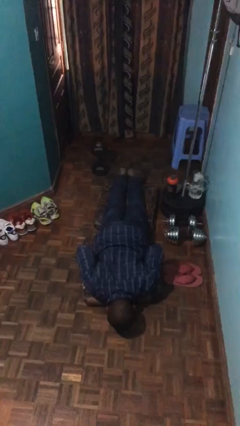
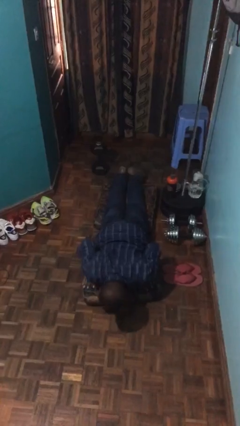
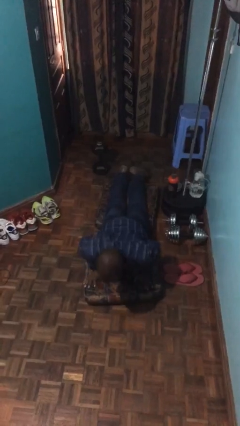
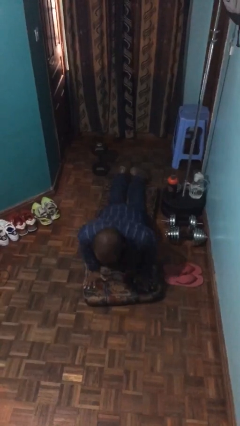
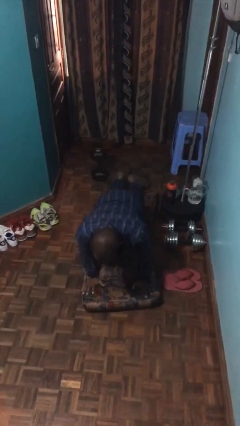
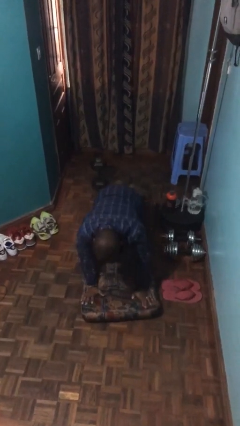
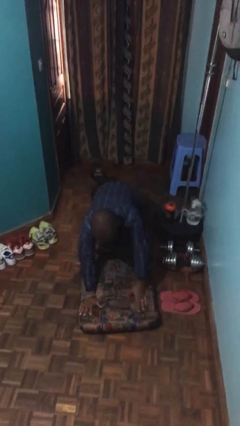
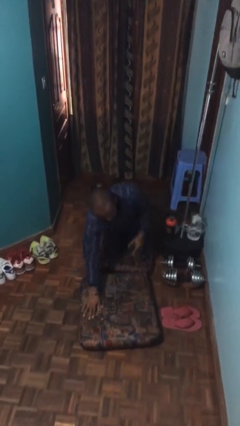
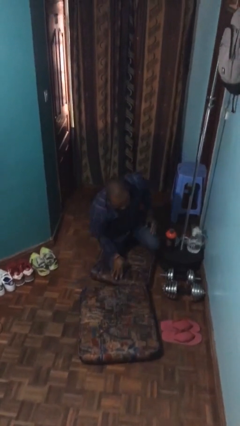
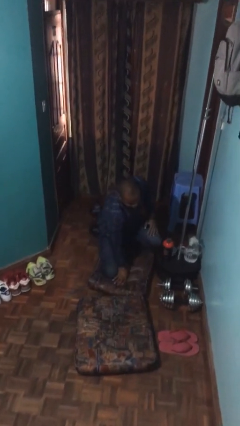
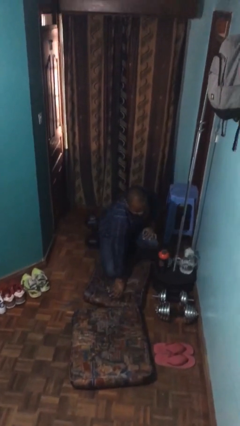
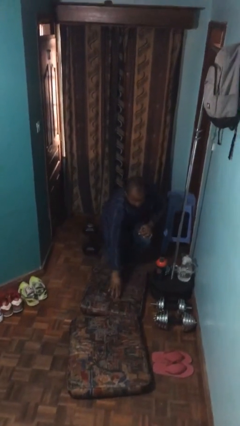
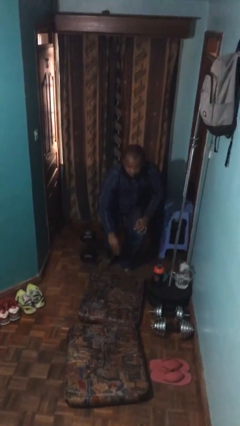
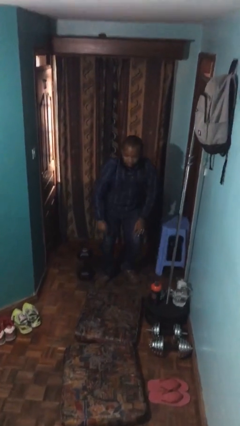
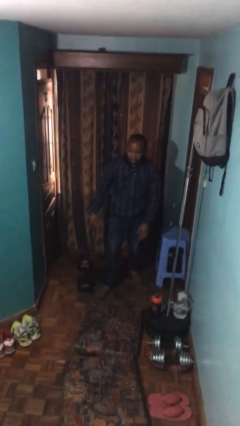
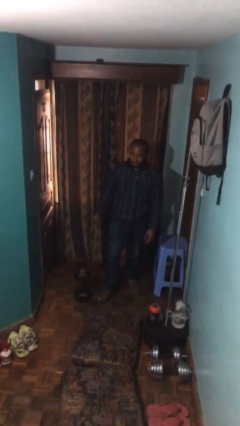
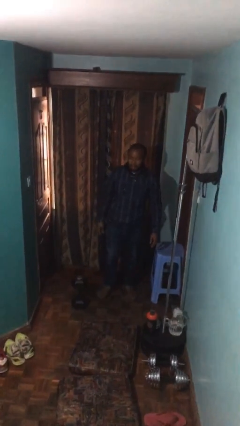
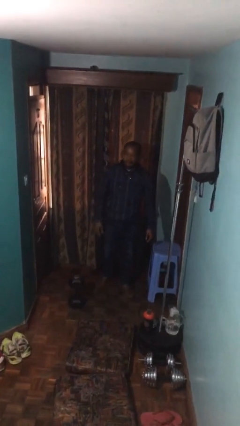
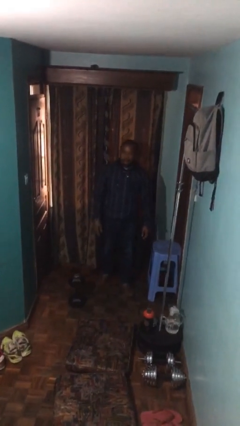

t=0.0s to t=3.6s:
person stands up from floor

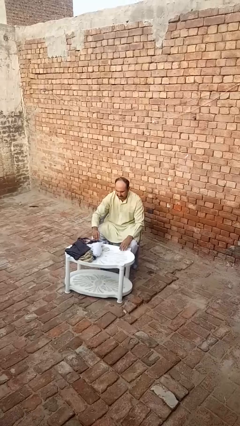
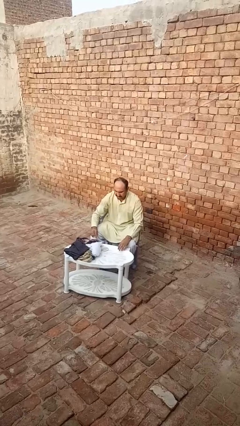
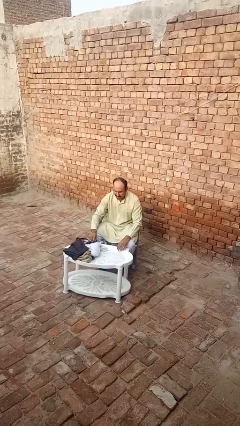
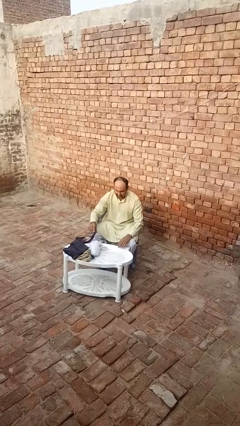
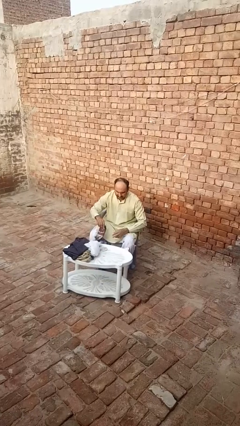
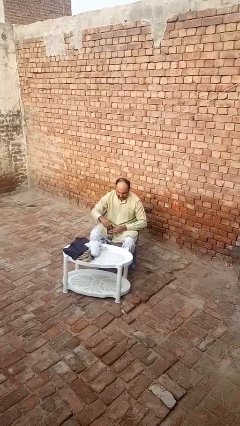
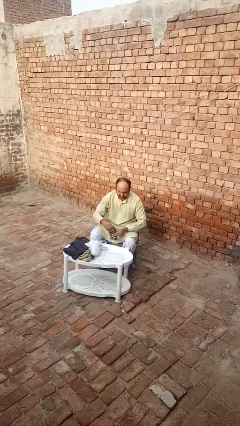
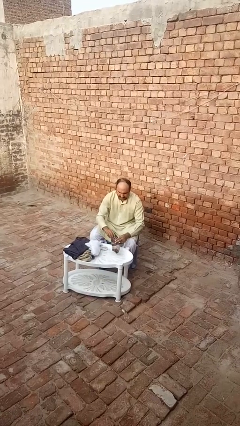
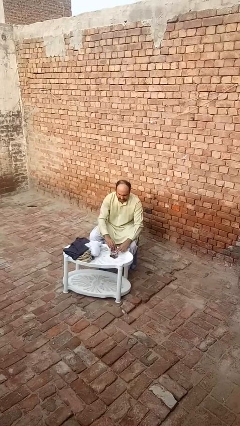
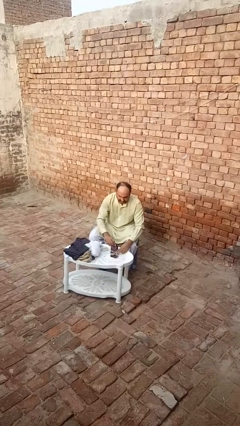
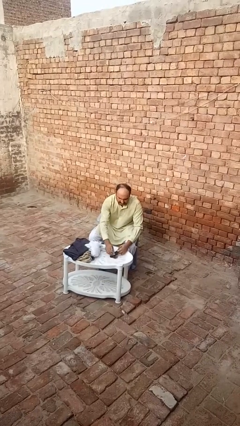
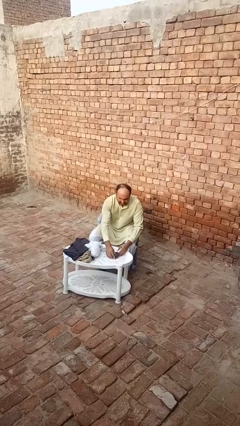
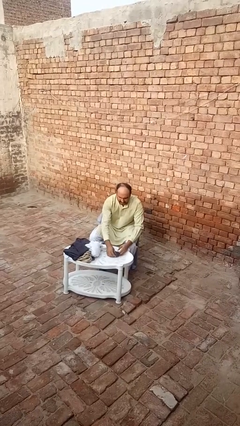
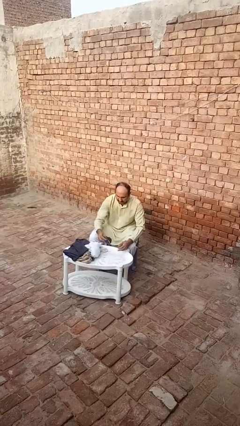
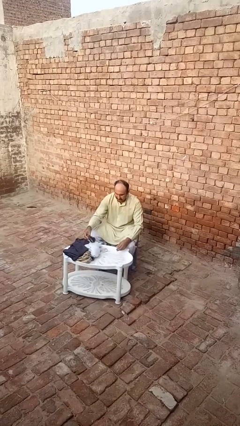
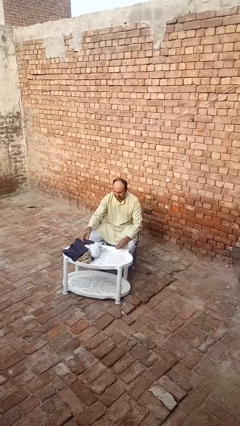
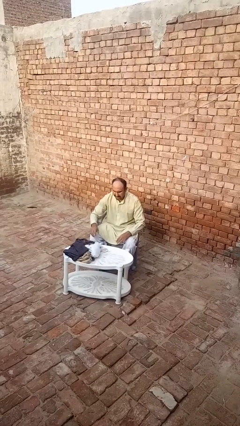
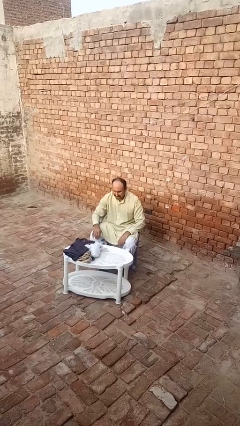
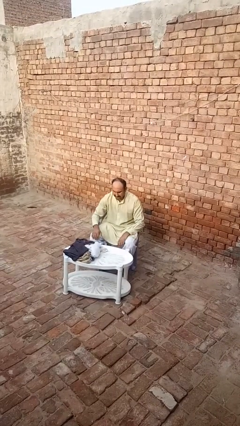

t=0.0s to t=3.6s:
person folds socks

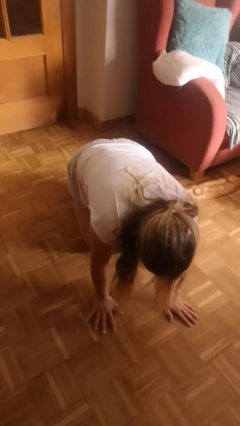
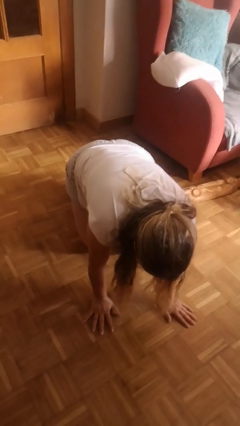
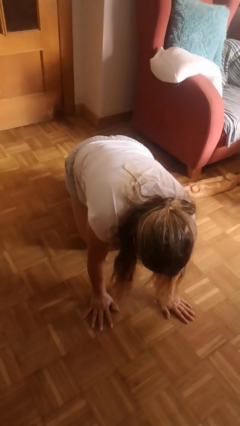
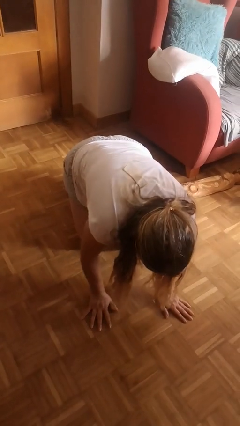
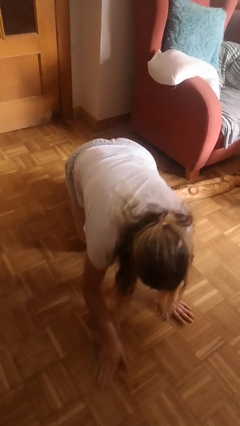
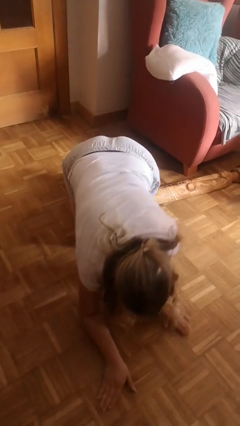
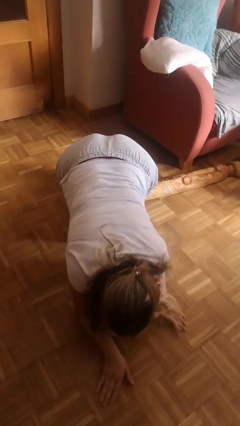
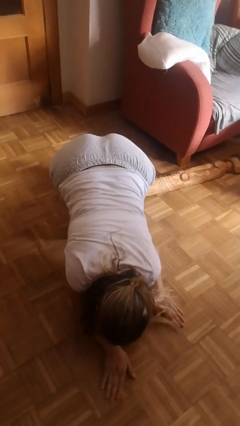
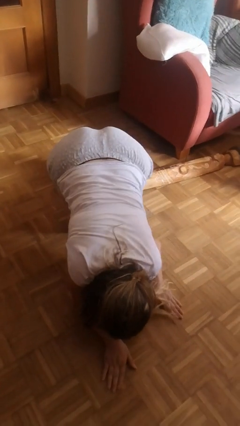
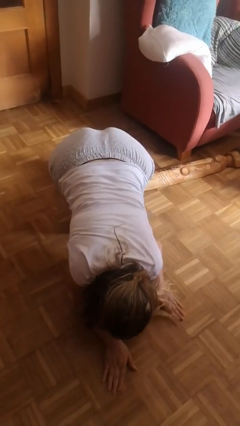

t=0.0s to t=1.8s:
person lies down on floor

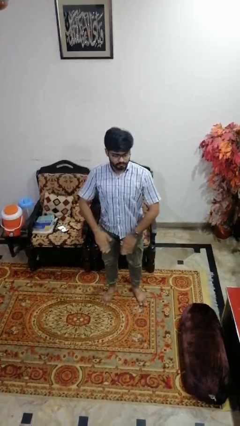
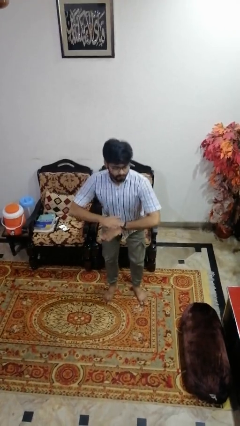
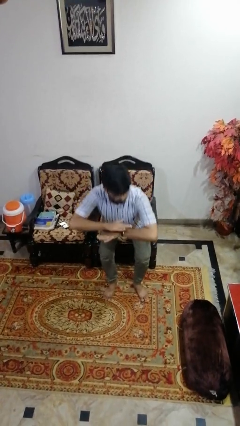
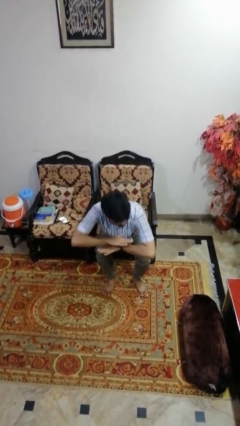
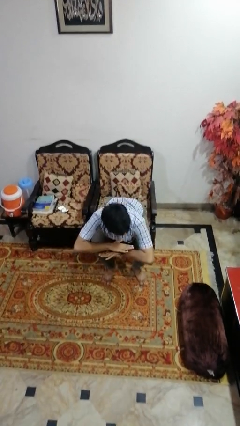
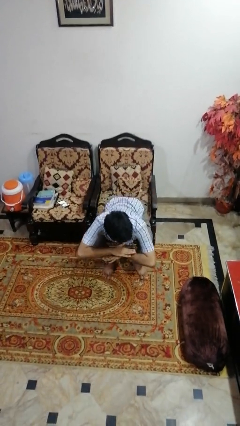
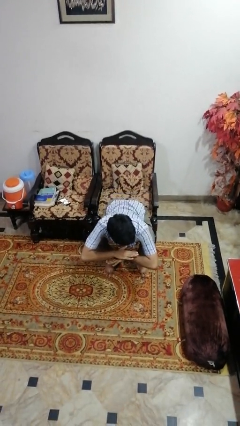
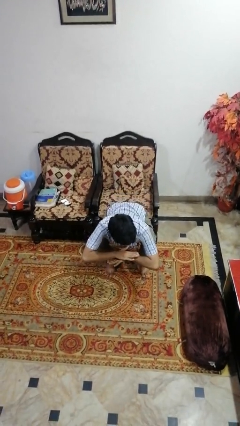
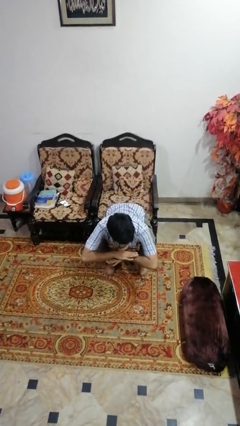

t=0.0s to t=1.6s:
person squats

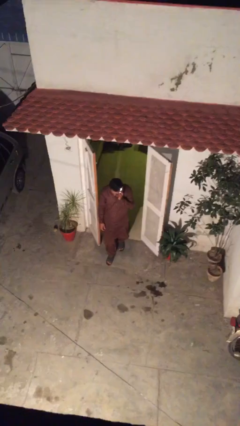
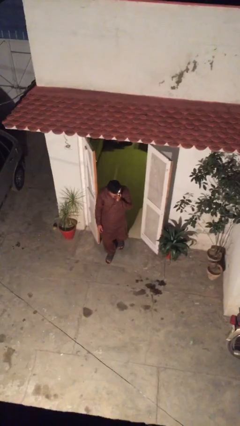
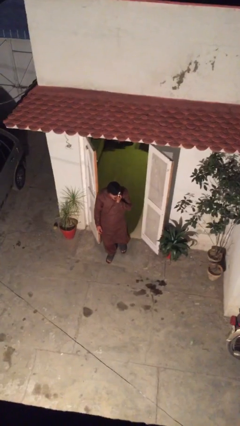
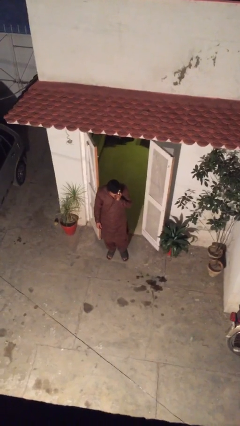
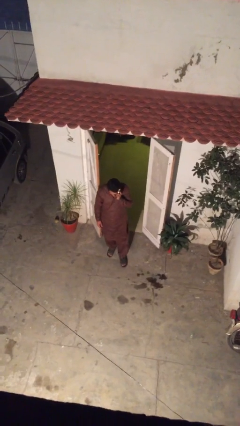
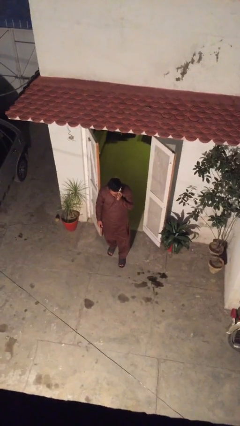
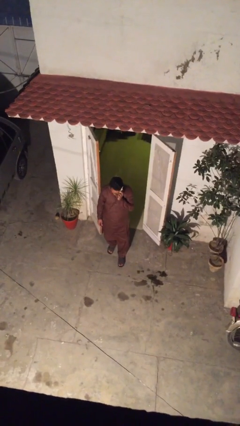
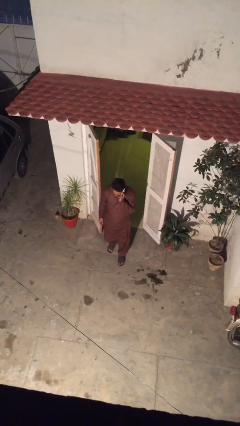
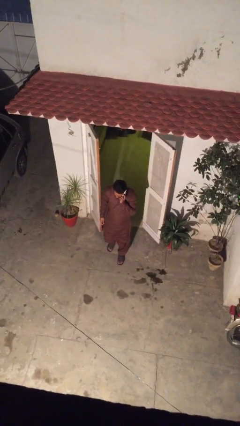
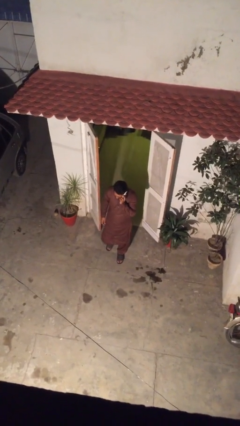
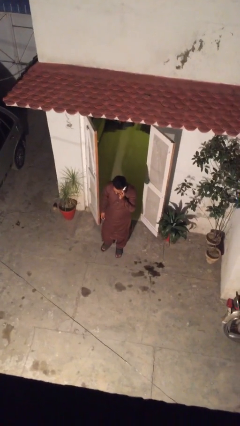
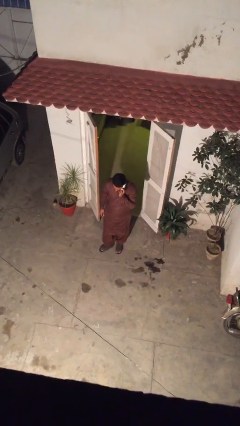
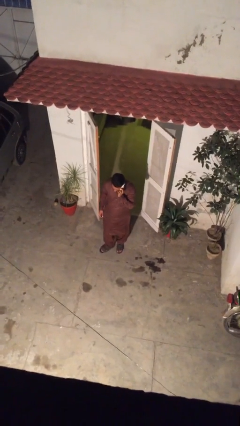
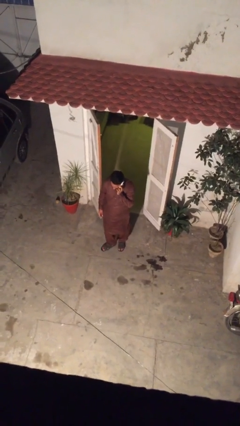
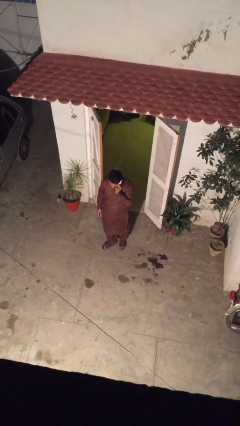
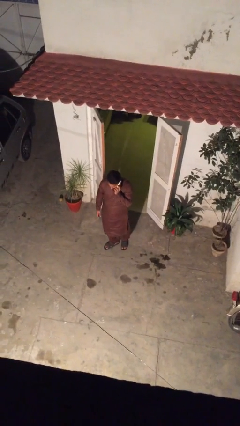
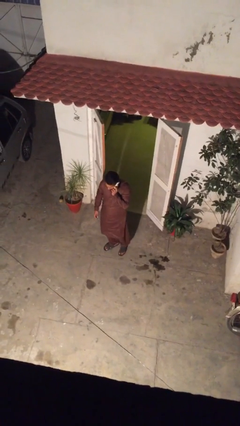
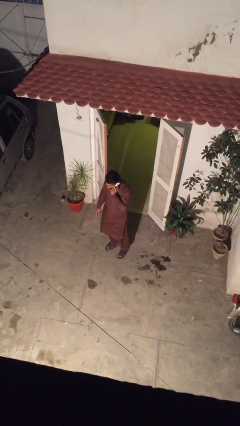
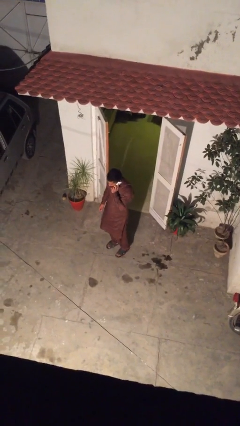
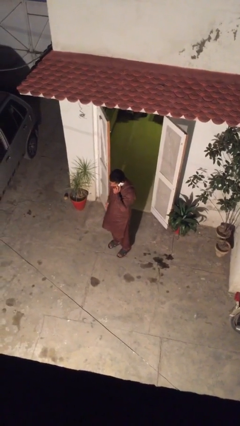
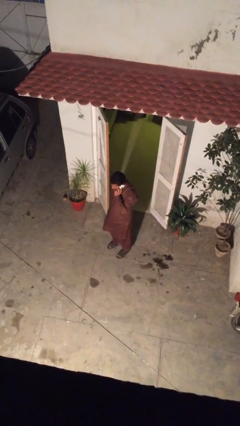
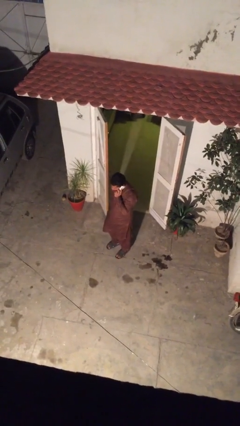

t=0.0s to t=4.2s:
person enters scene through structure

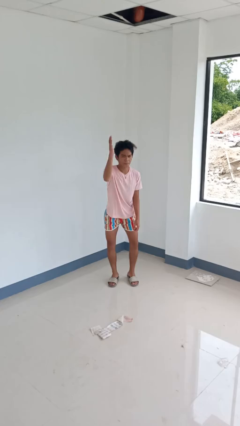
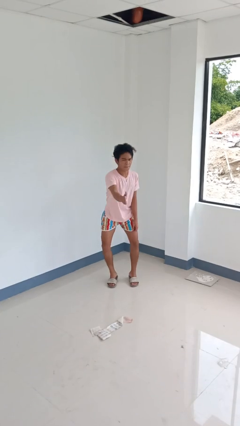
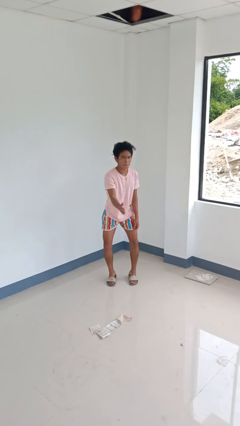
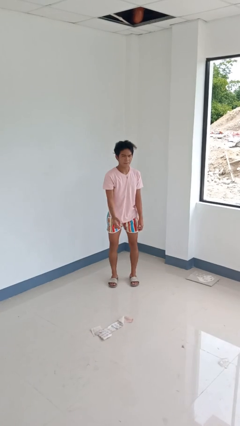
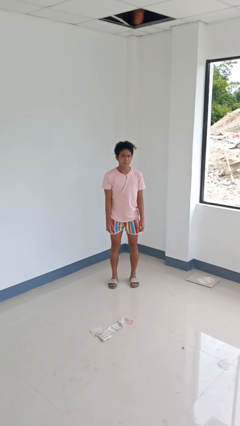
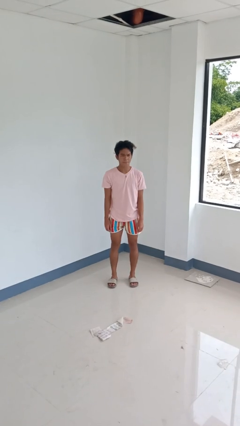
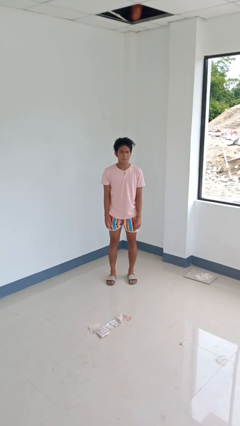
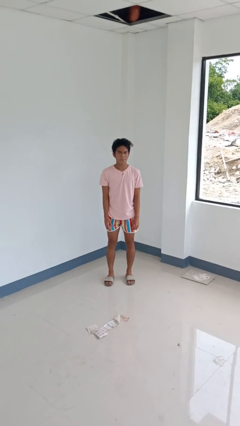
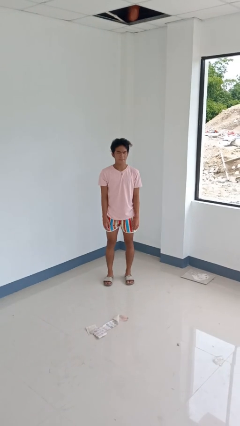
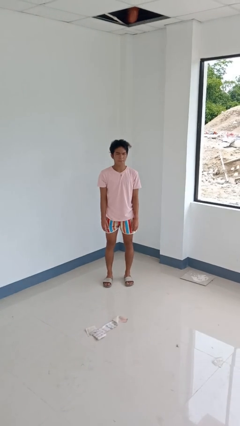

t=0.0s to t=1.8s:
person karate chop

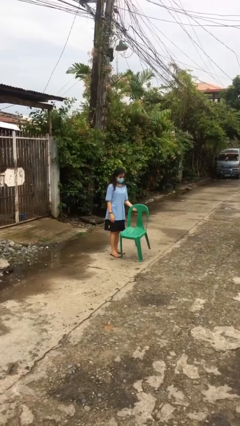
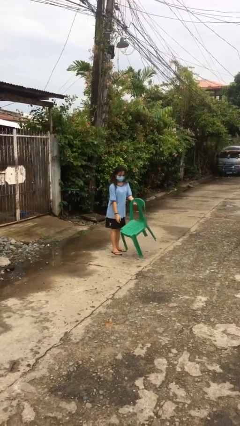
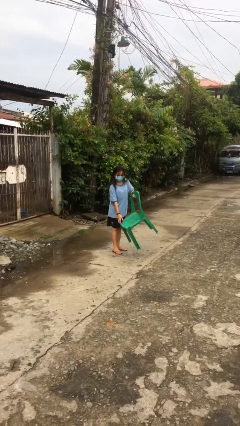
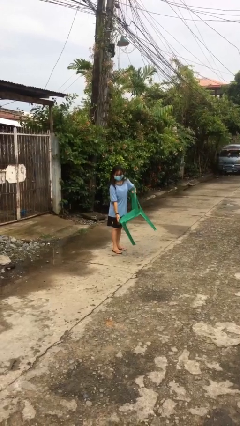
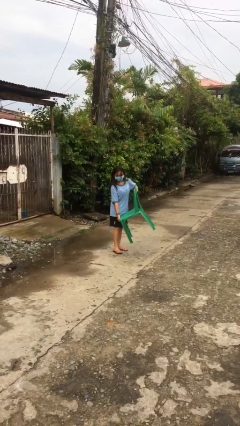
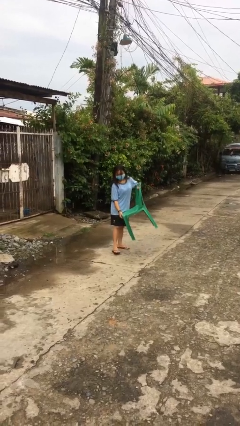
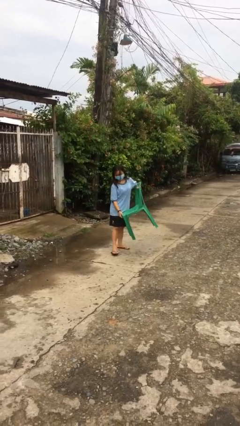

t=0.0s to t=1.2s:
person picks up object from floor
